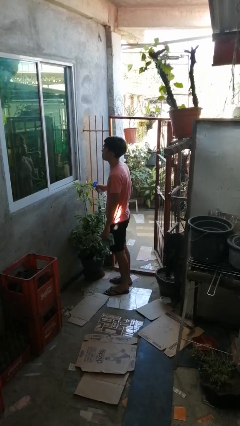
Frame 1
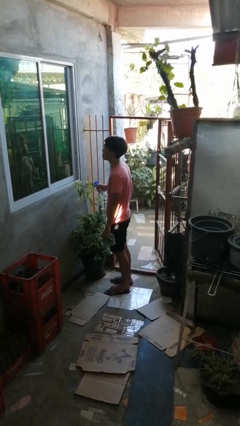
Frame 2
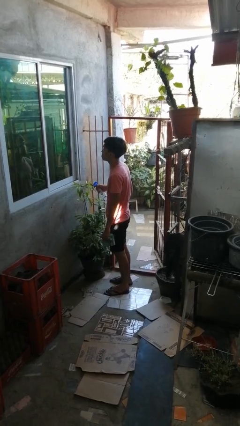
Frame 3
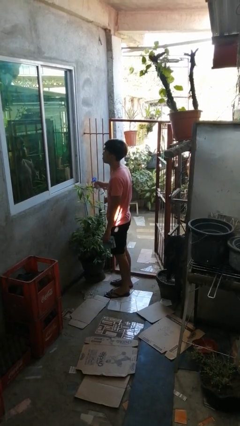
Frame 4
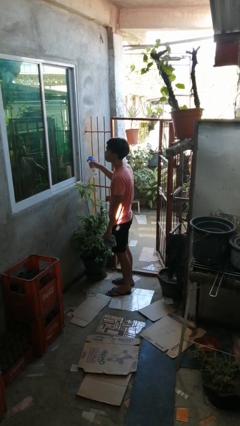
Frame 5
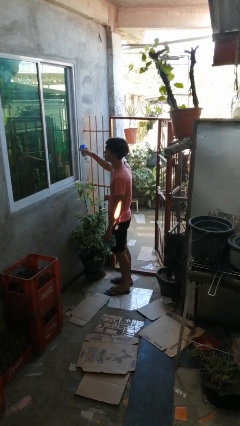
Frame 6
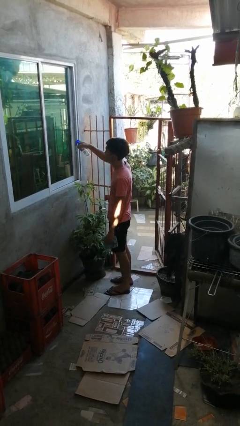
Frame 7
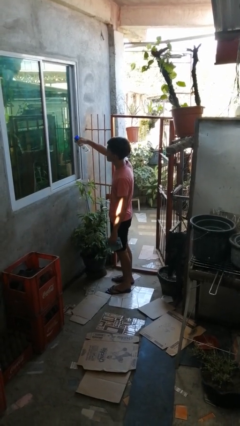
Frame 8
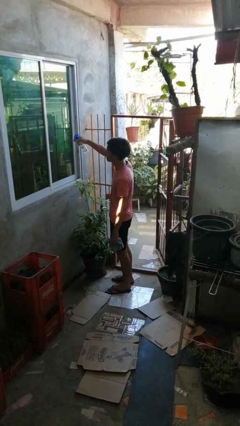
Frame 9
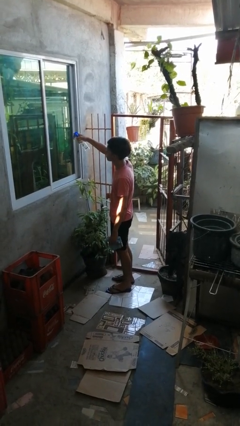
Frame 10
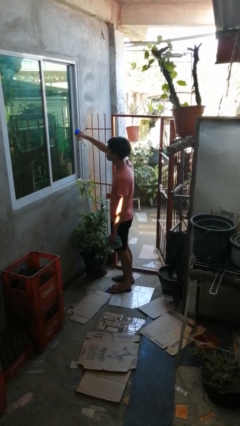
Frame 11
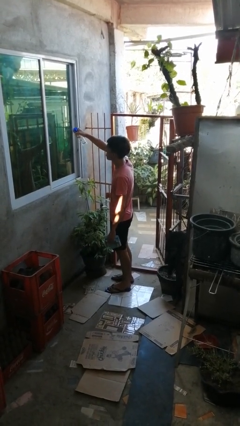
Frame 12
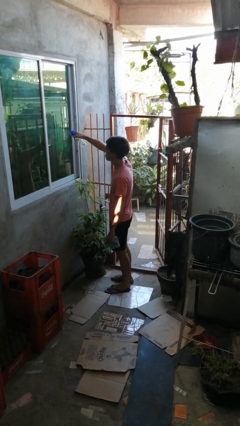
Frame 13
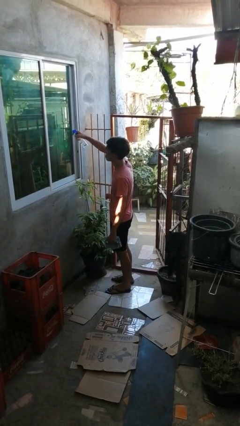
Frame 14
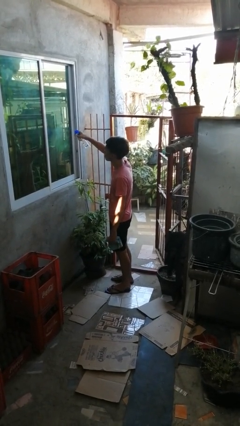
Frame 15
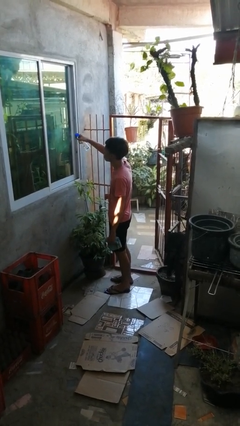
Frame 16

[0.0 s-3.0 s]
person sprays from bottle

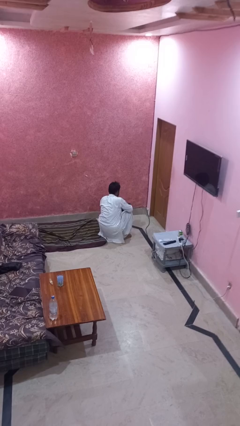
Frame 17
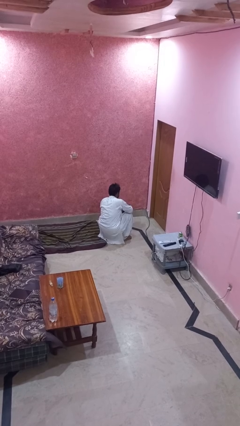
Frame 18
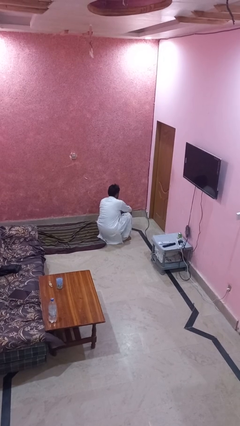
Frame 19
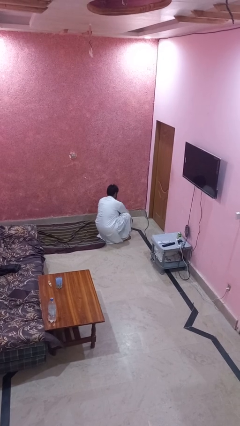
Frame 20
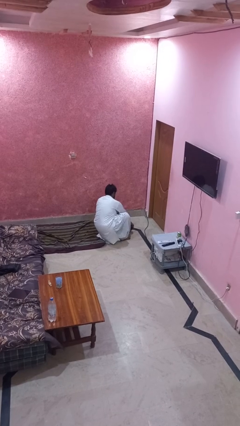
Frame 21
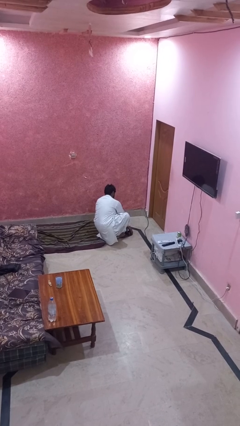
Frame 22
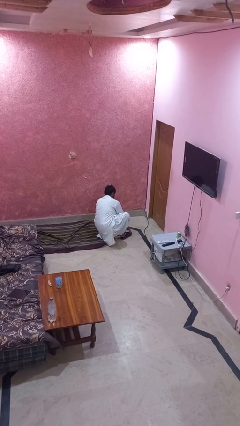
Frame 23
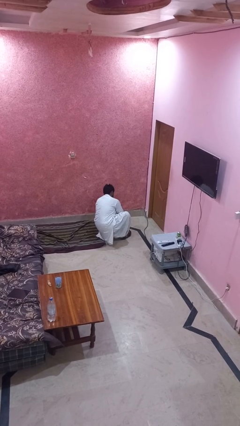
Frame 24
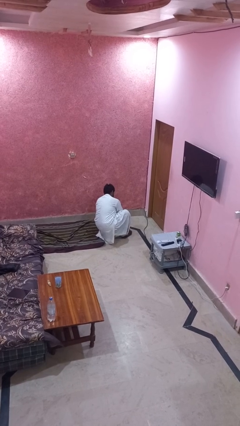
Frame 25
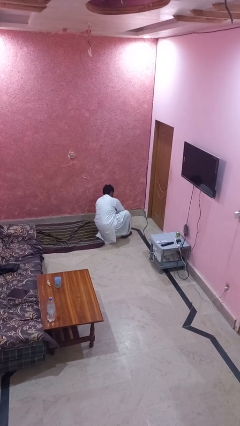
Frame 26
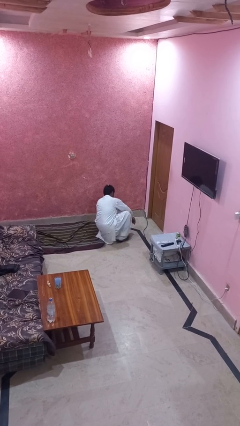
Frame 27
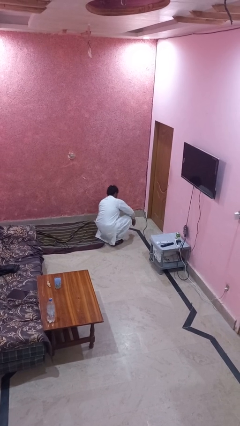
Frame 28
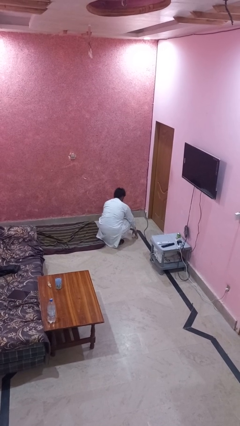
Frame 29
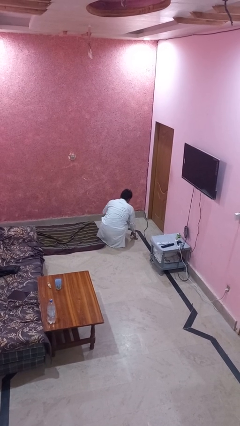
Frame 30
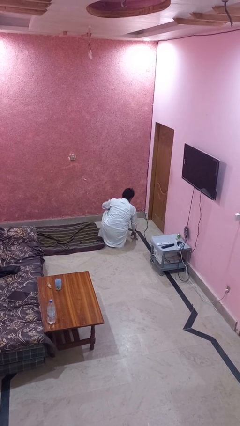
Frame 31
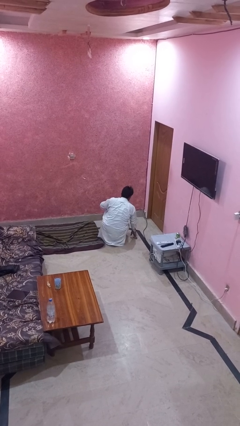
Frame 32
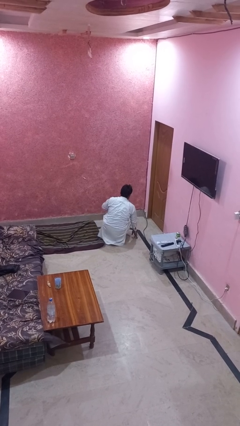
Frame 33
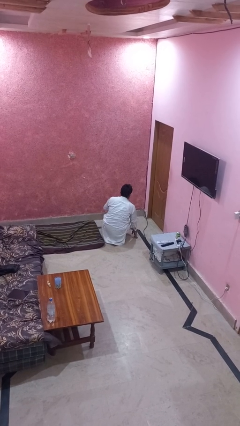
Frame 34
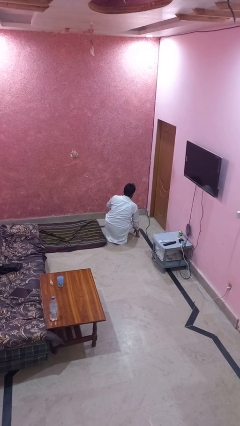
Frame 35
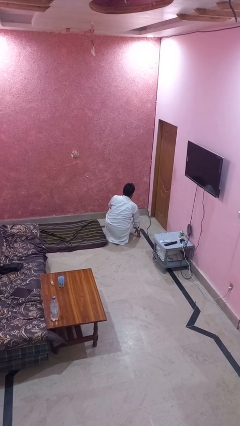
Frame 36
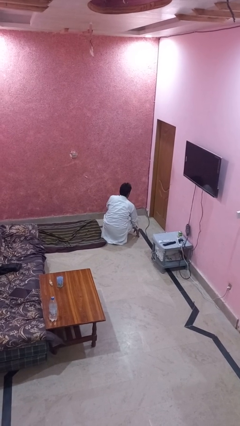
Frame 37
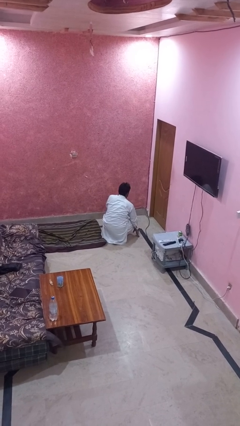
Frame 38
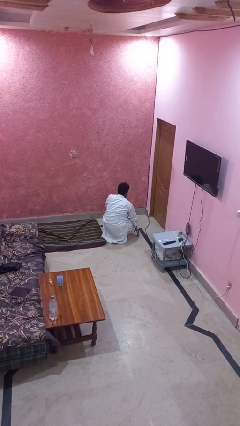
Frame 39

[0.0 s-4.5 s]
person puts on shoes

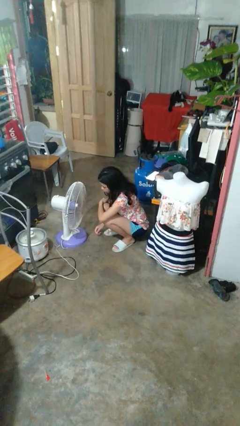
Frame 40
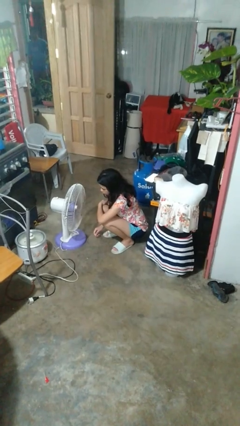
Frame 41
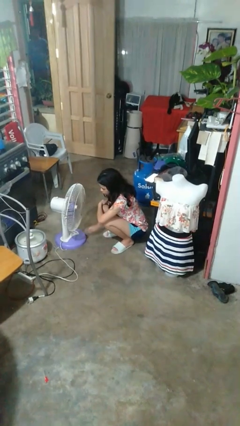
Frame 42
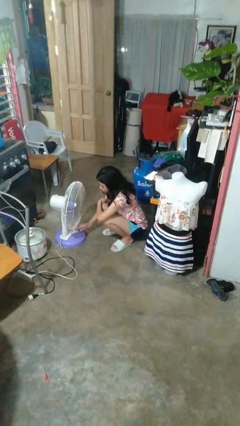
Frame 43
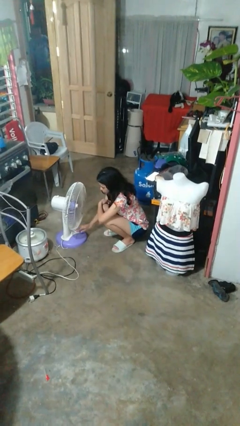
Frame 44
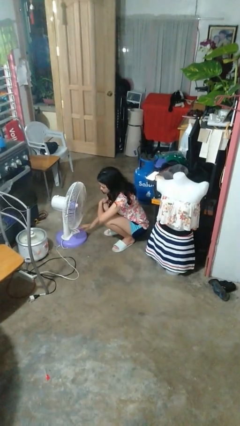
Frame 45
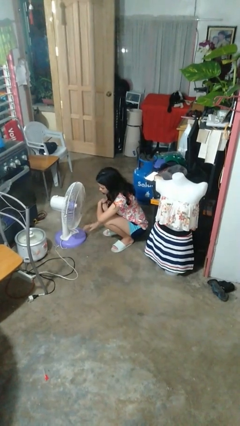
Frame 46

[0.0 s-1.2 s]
person turns off fan

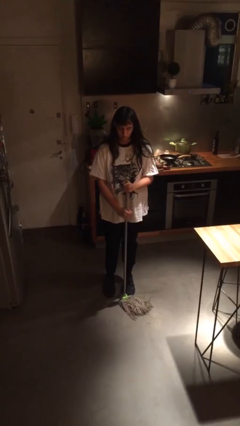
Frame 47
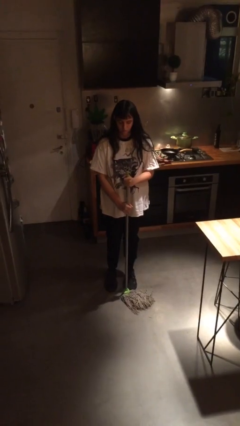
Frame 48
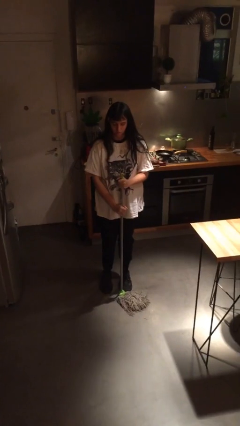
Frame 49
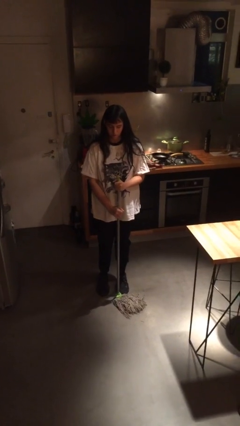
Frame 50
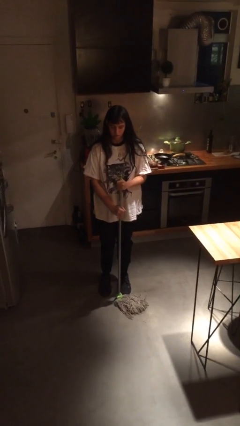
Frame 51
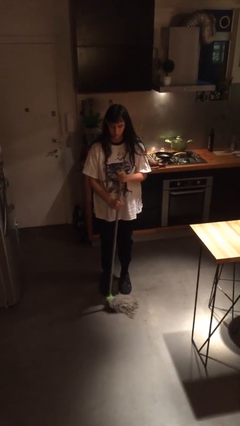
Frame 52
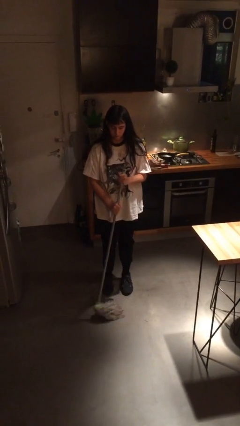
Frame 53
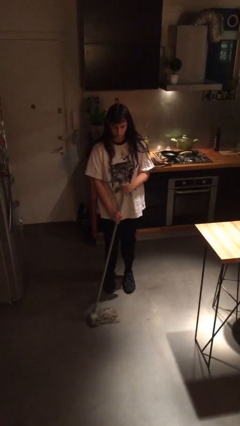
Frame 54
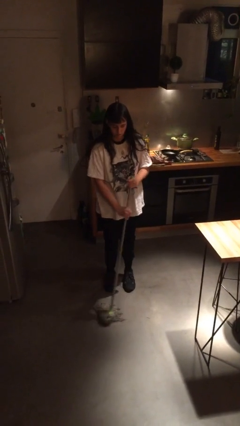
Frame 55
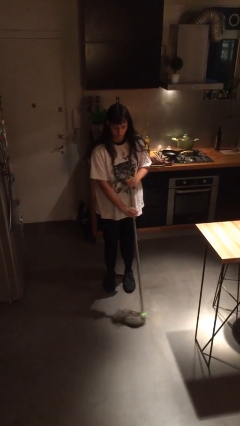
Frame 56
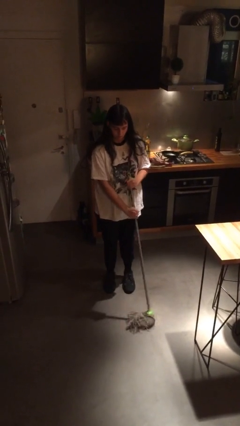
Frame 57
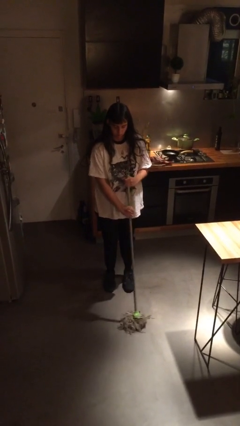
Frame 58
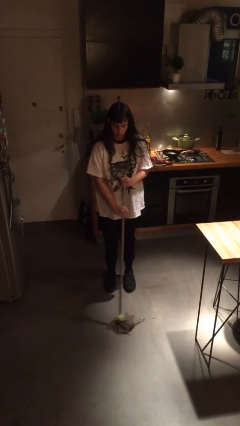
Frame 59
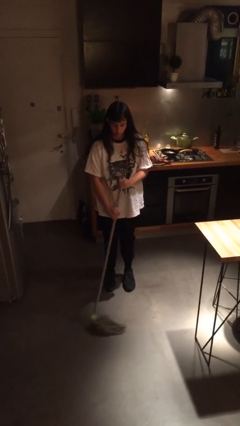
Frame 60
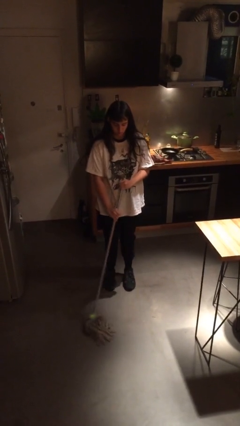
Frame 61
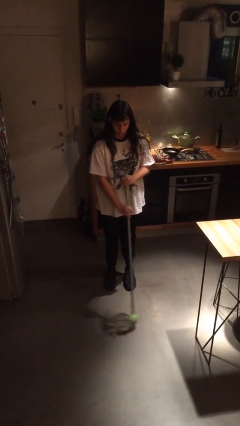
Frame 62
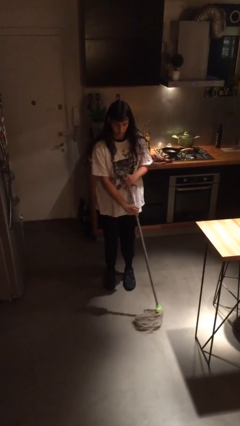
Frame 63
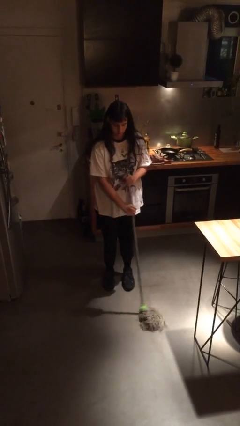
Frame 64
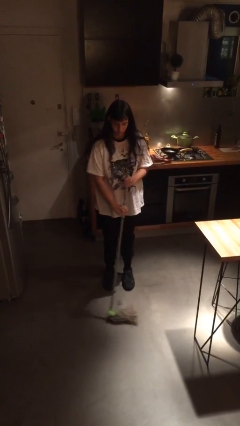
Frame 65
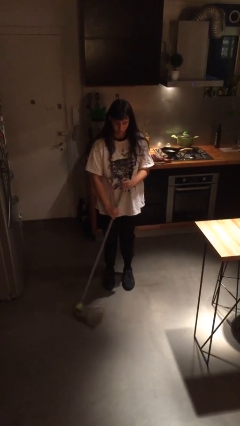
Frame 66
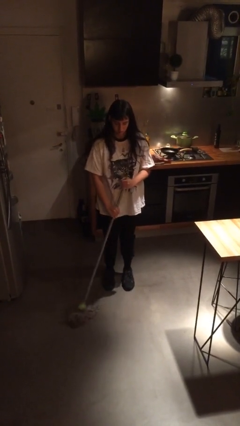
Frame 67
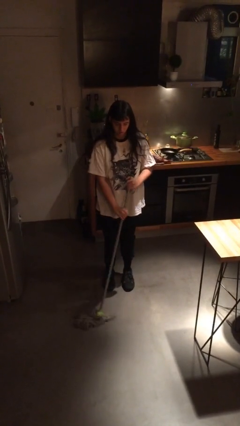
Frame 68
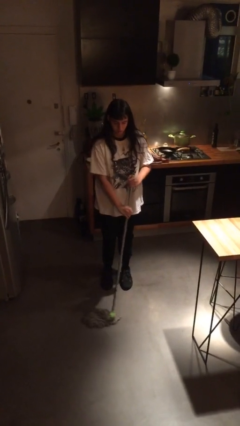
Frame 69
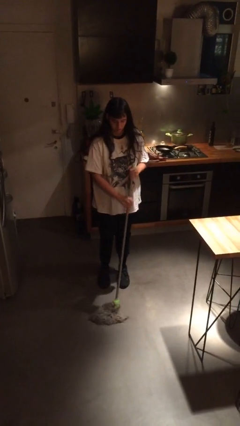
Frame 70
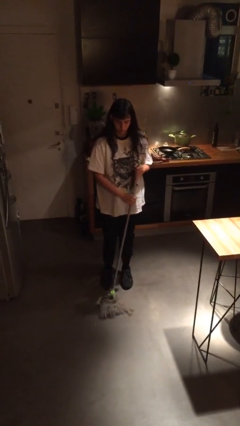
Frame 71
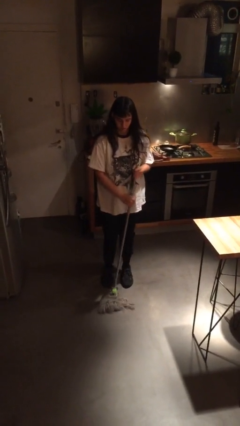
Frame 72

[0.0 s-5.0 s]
person mops

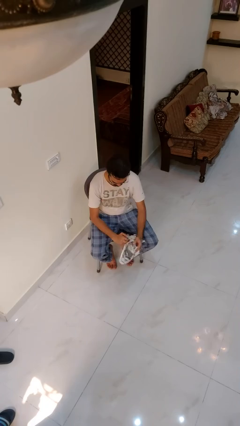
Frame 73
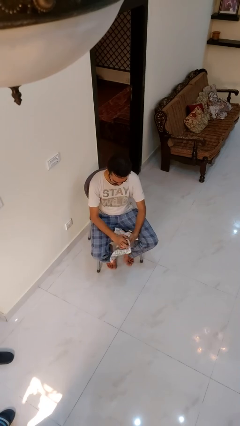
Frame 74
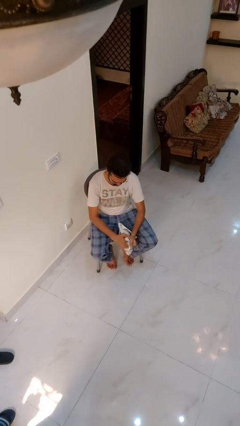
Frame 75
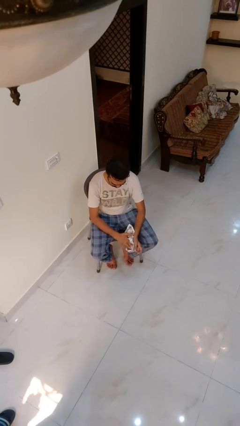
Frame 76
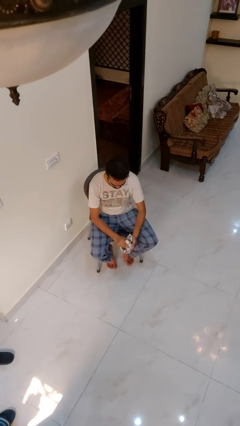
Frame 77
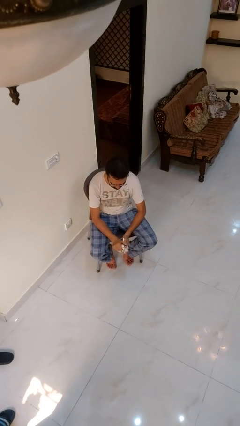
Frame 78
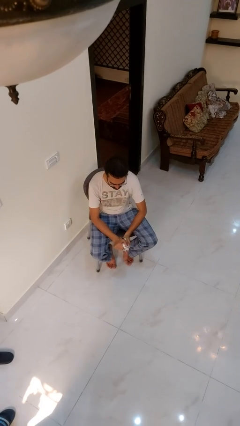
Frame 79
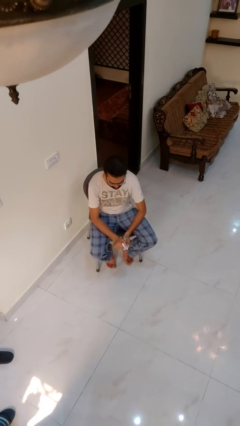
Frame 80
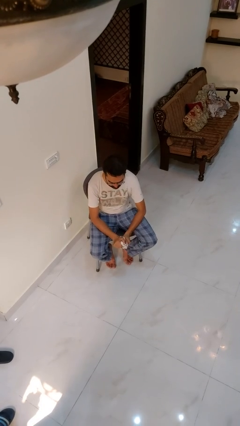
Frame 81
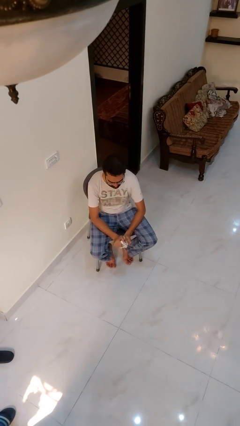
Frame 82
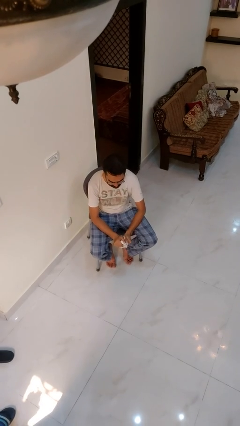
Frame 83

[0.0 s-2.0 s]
person crumples paper

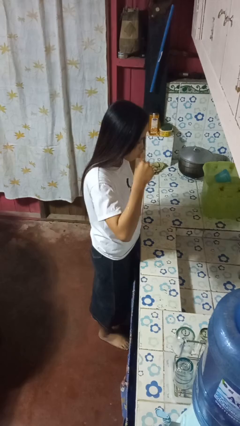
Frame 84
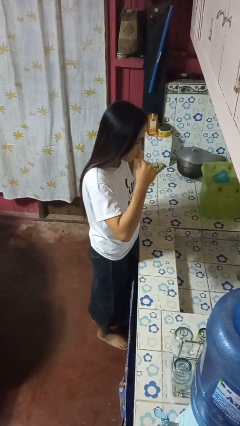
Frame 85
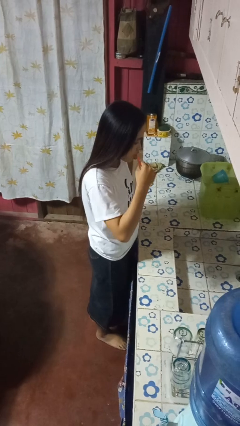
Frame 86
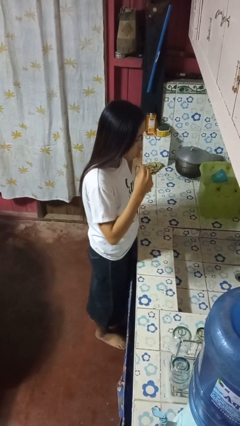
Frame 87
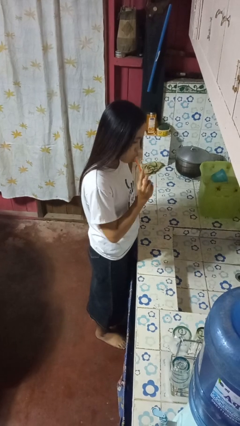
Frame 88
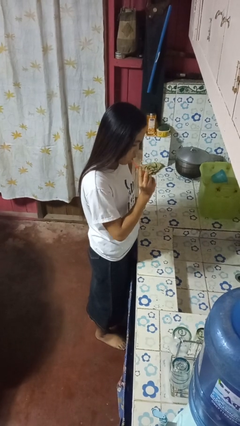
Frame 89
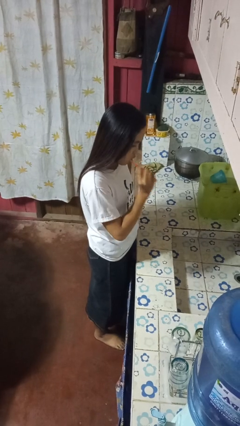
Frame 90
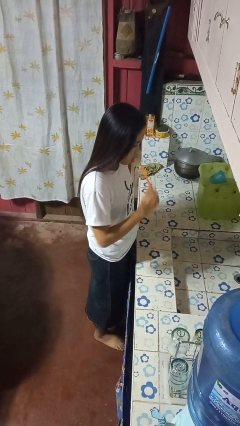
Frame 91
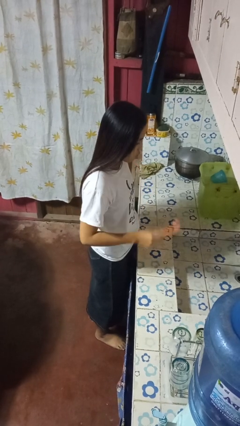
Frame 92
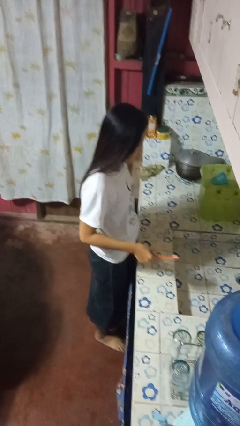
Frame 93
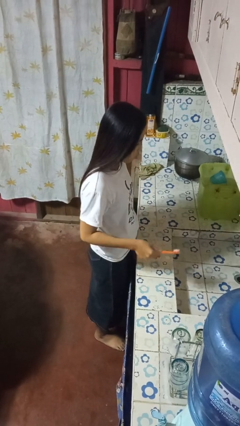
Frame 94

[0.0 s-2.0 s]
person brushes teeth
